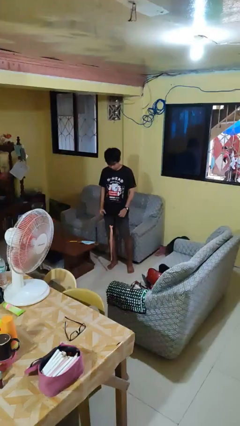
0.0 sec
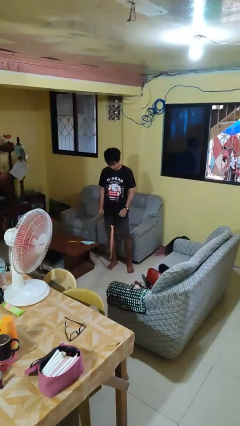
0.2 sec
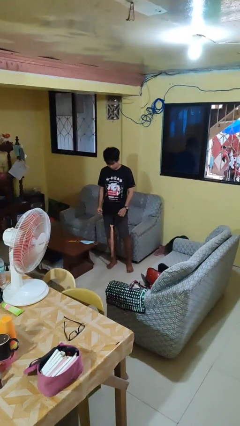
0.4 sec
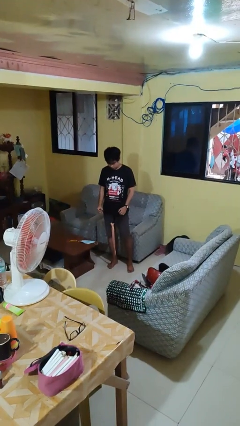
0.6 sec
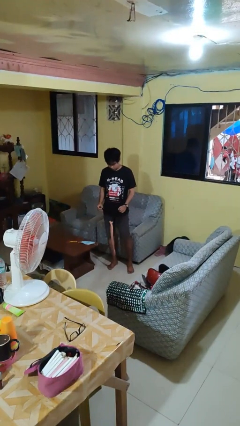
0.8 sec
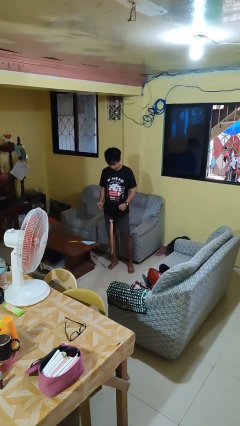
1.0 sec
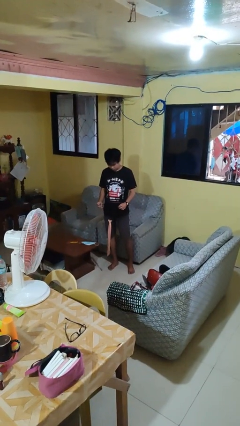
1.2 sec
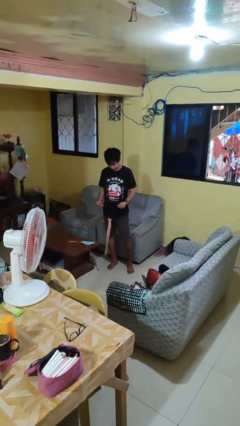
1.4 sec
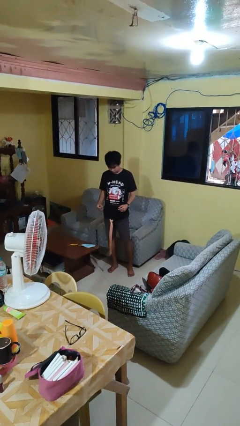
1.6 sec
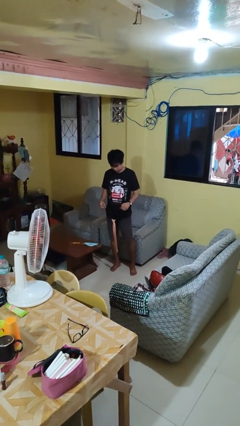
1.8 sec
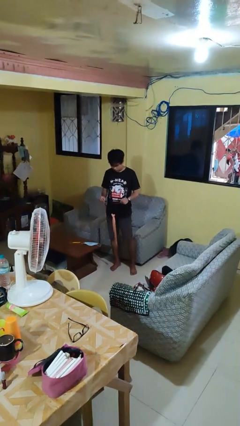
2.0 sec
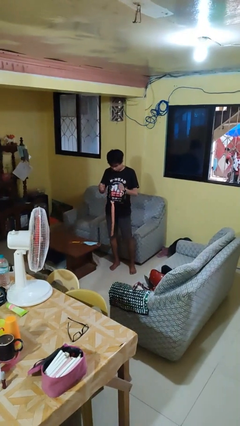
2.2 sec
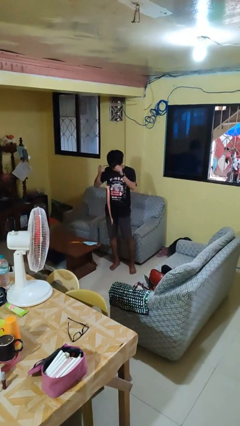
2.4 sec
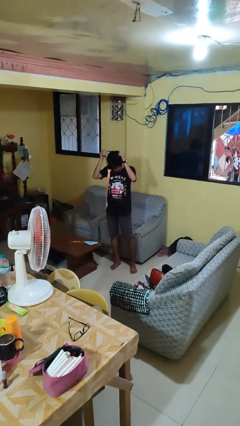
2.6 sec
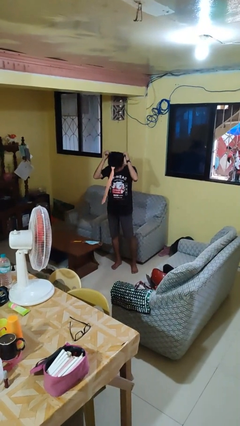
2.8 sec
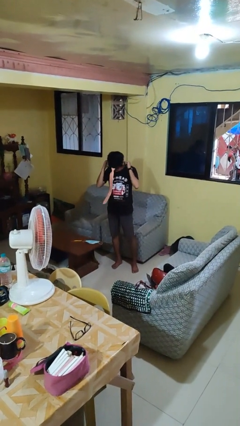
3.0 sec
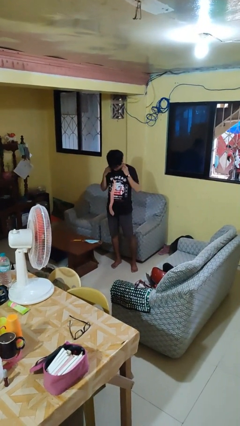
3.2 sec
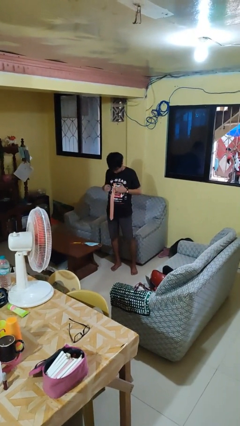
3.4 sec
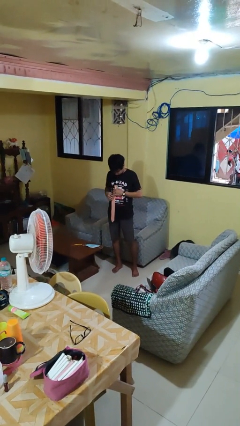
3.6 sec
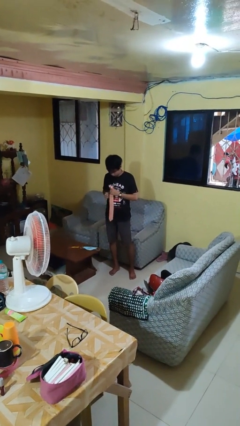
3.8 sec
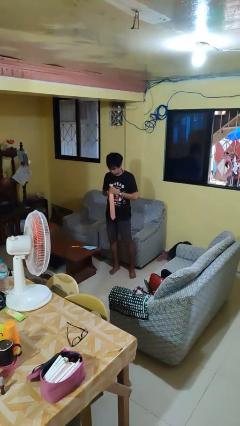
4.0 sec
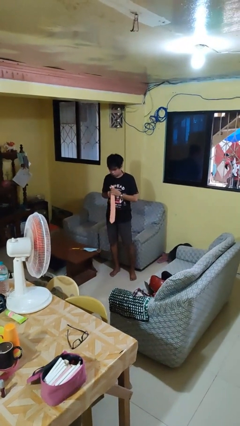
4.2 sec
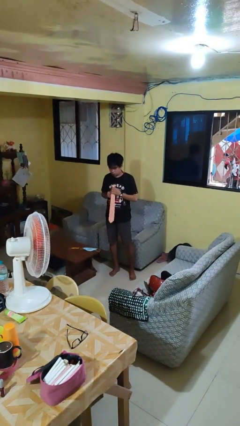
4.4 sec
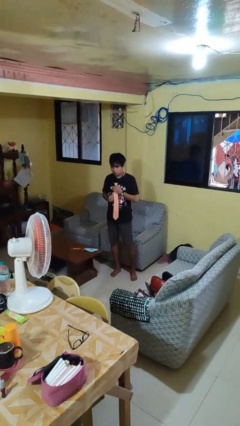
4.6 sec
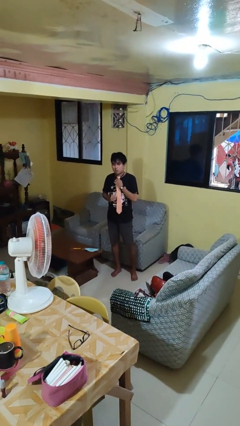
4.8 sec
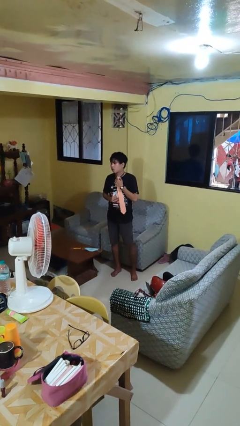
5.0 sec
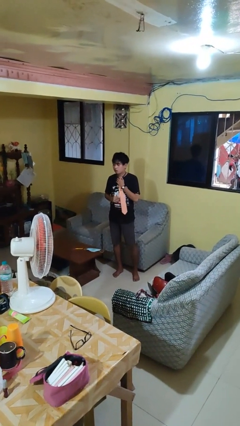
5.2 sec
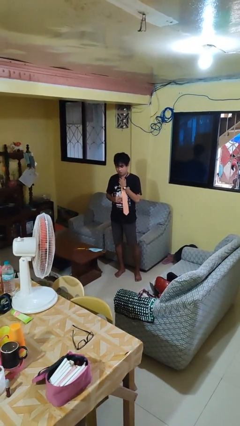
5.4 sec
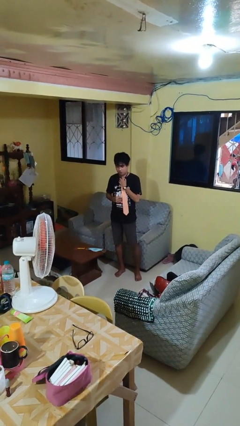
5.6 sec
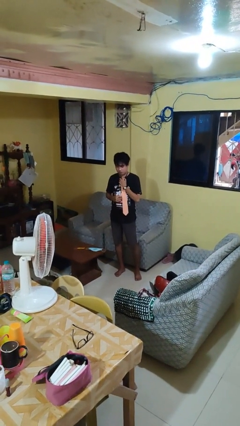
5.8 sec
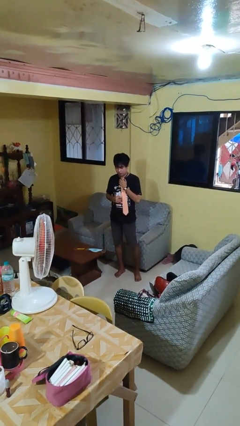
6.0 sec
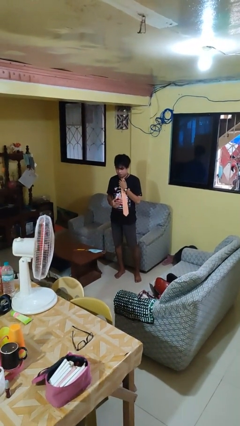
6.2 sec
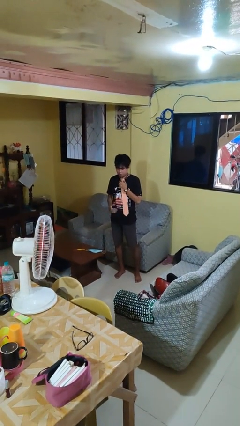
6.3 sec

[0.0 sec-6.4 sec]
person puts on necktie

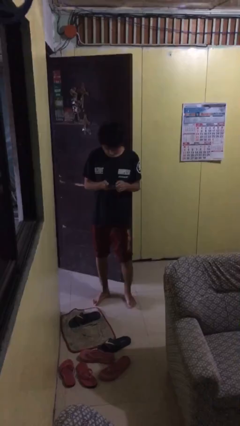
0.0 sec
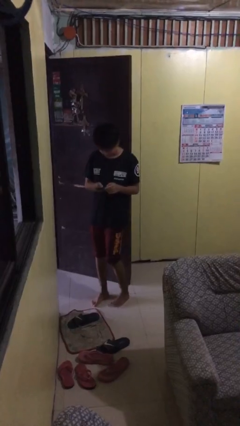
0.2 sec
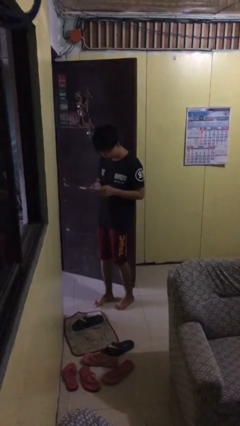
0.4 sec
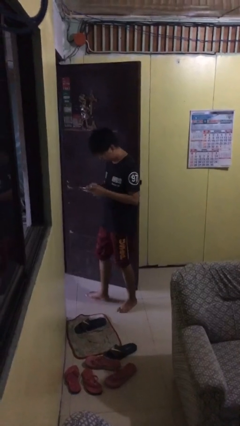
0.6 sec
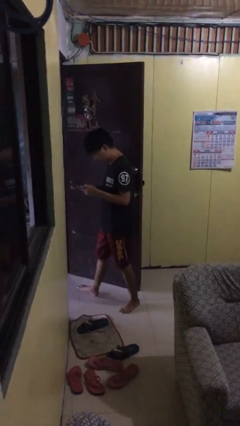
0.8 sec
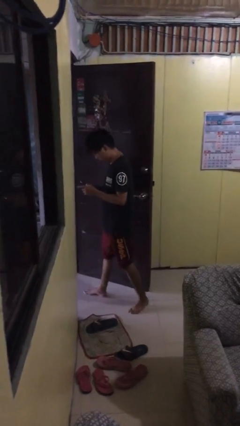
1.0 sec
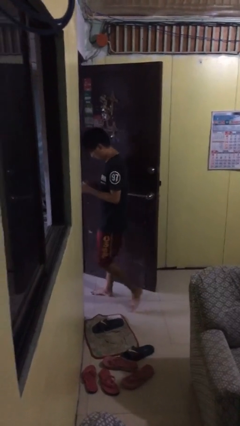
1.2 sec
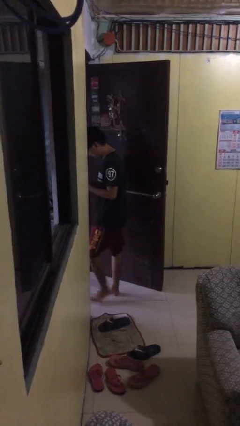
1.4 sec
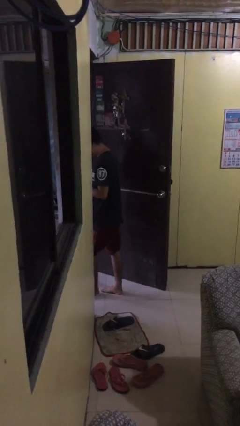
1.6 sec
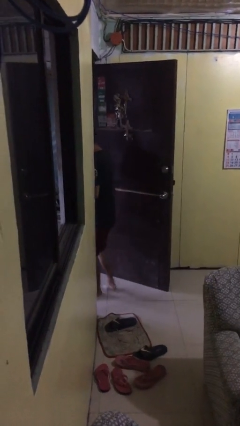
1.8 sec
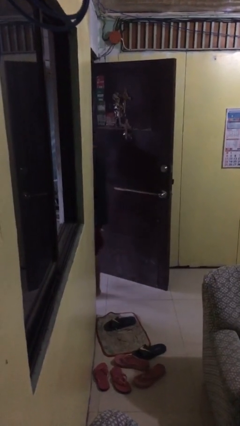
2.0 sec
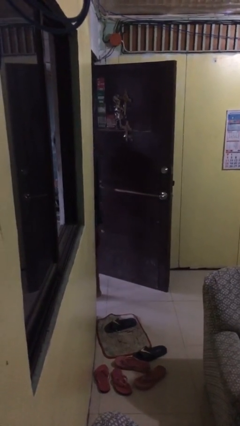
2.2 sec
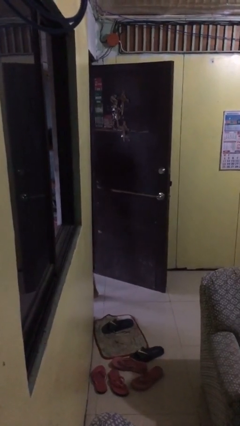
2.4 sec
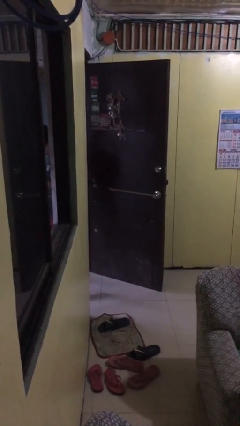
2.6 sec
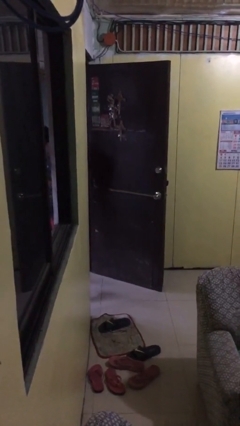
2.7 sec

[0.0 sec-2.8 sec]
person exits scene through structure

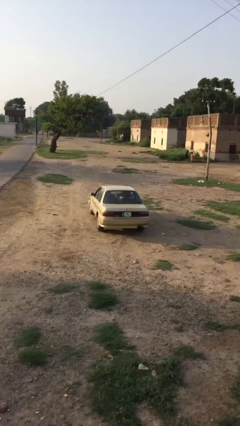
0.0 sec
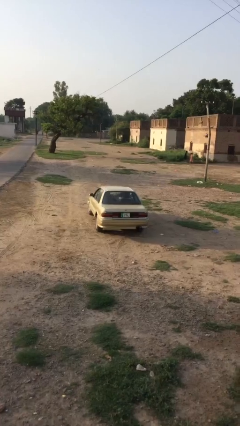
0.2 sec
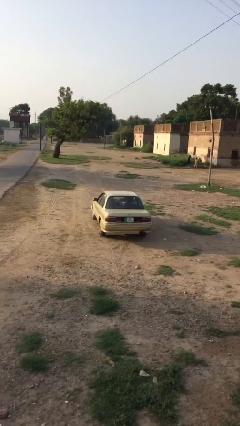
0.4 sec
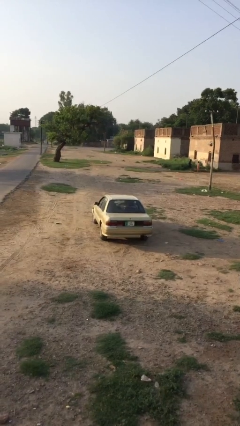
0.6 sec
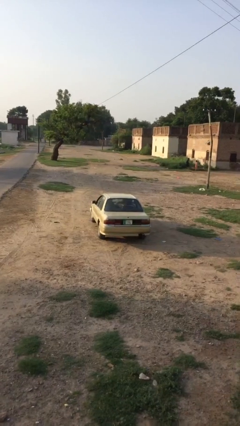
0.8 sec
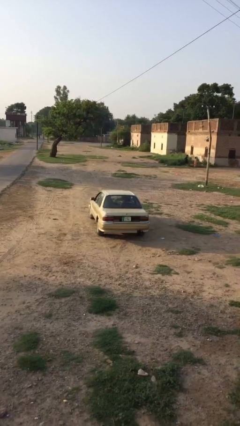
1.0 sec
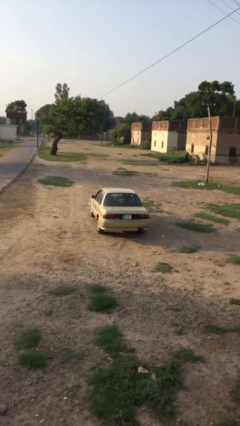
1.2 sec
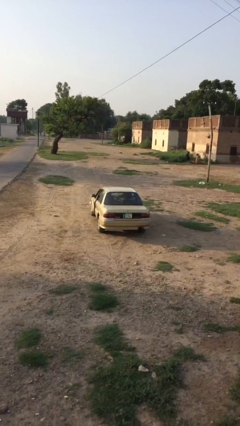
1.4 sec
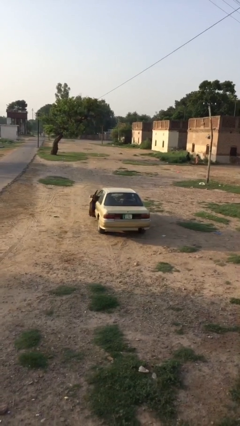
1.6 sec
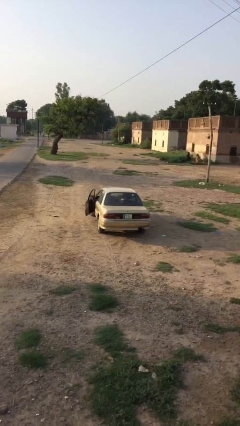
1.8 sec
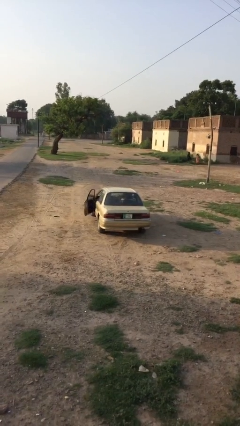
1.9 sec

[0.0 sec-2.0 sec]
car drops off person

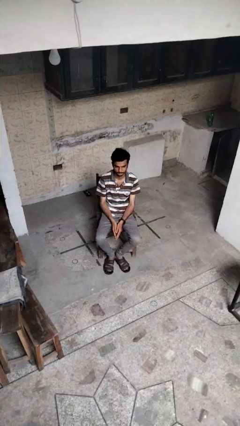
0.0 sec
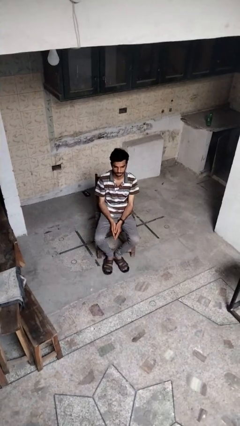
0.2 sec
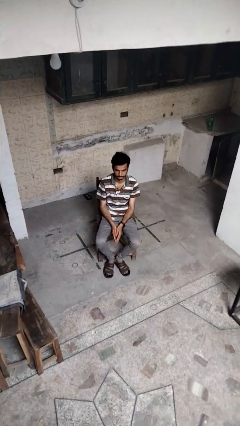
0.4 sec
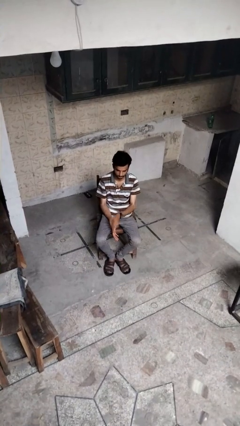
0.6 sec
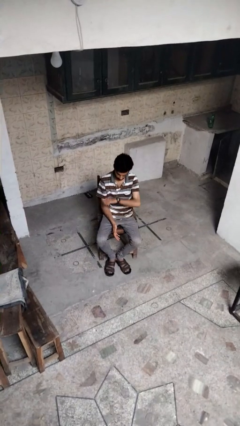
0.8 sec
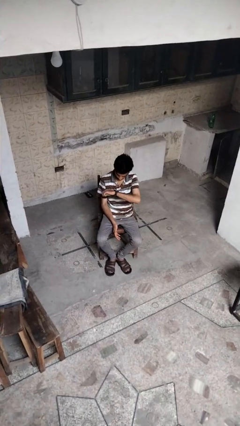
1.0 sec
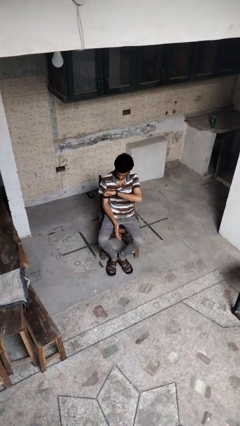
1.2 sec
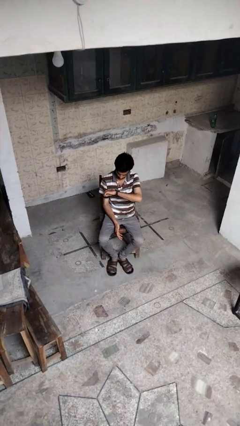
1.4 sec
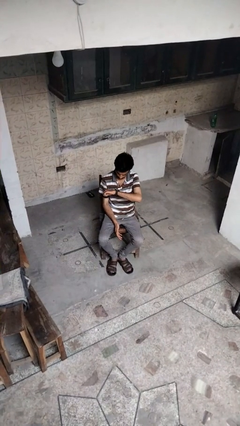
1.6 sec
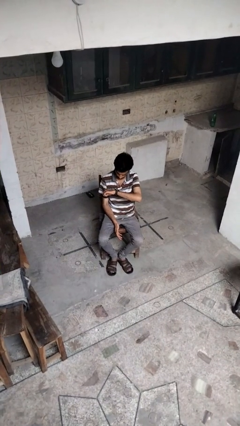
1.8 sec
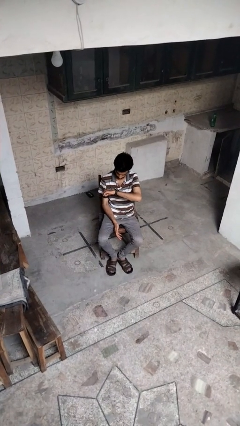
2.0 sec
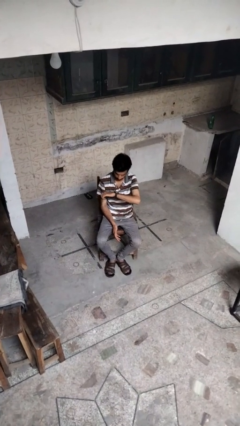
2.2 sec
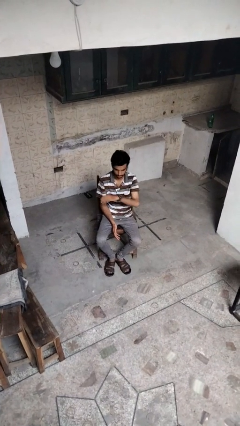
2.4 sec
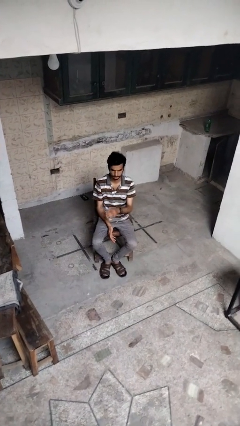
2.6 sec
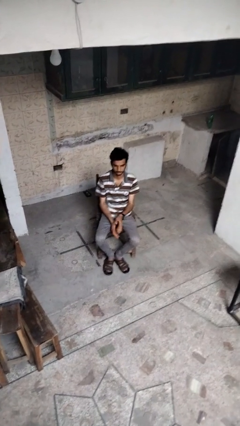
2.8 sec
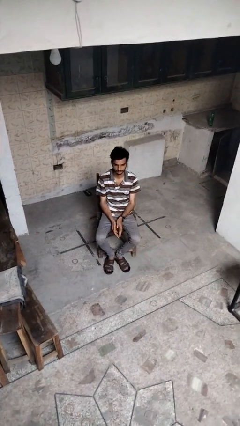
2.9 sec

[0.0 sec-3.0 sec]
person looks at wristwatch

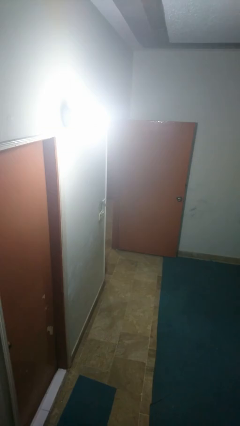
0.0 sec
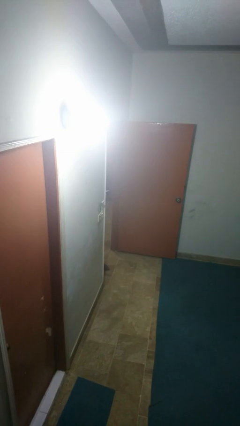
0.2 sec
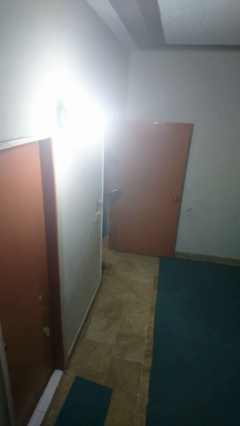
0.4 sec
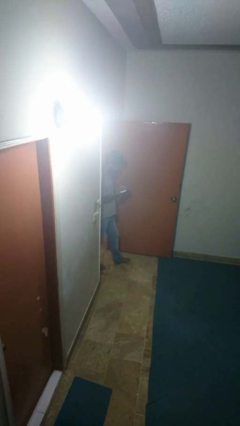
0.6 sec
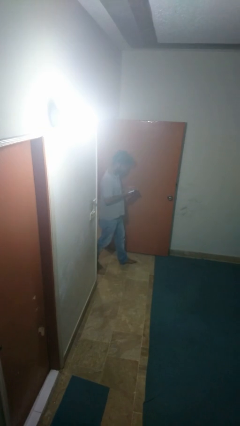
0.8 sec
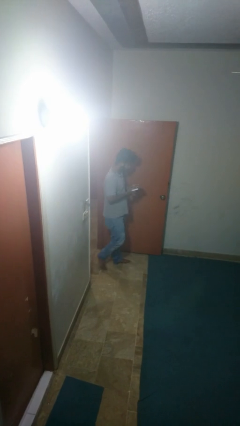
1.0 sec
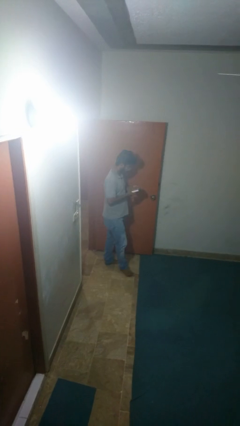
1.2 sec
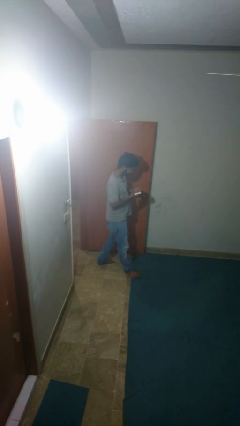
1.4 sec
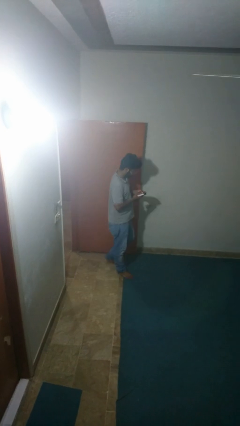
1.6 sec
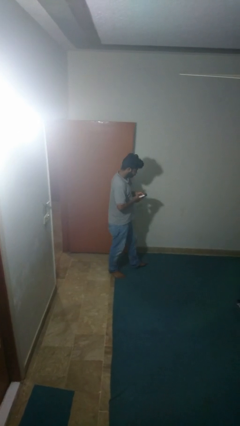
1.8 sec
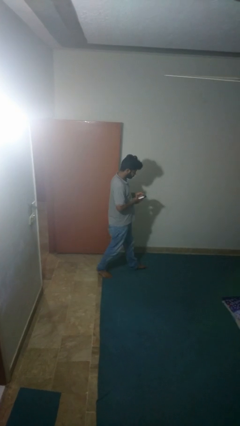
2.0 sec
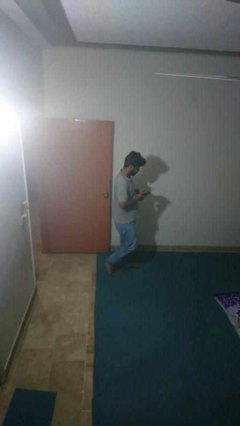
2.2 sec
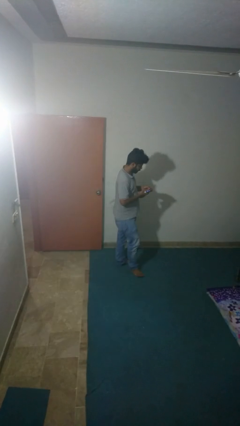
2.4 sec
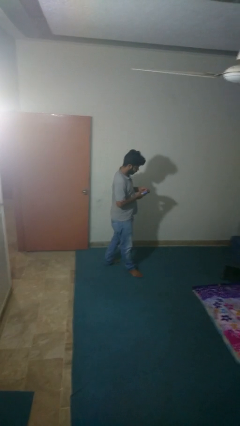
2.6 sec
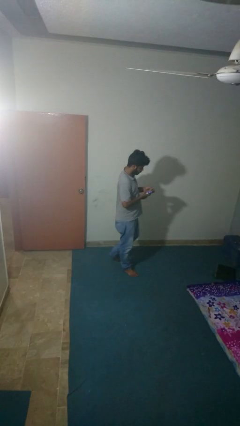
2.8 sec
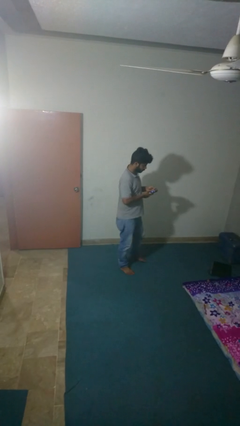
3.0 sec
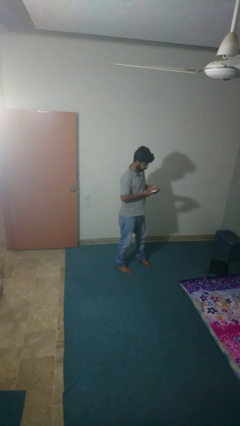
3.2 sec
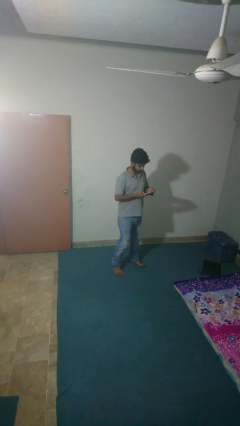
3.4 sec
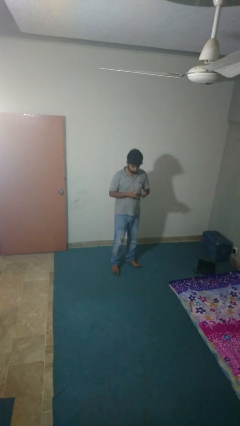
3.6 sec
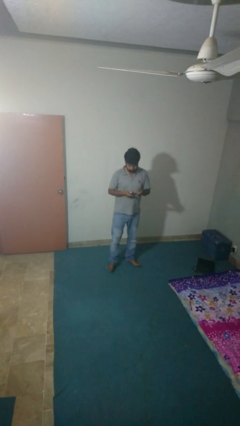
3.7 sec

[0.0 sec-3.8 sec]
person enters scene through structure
